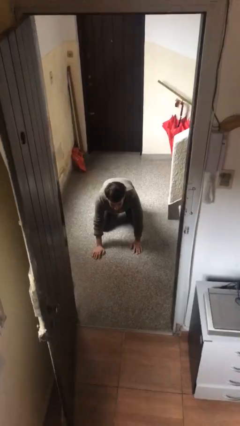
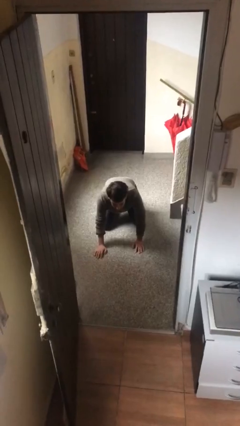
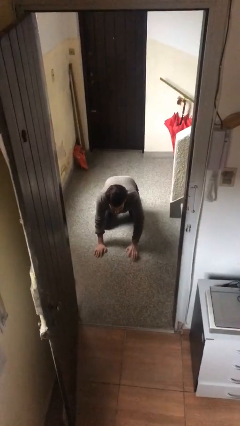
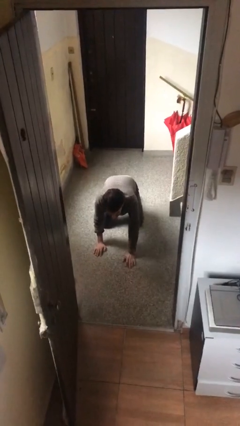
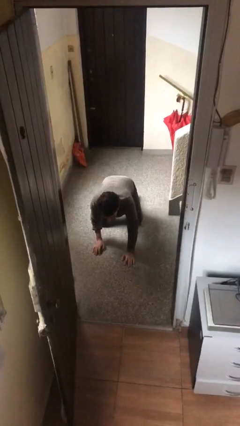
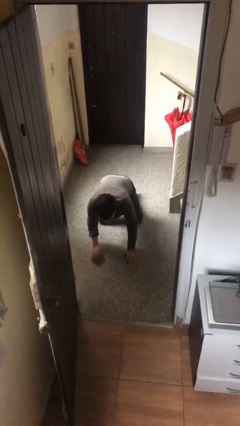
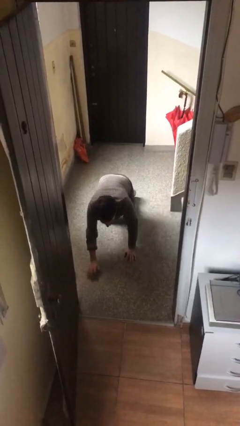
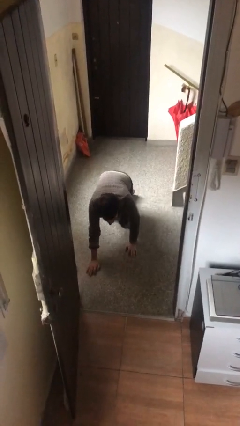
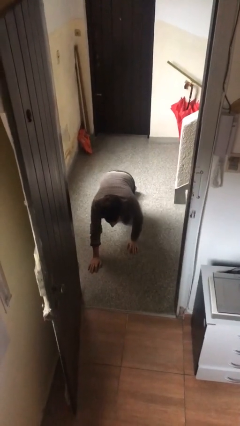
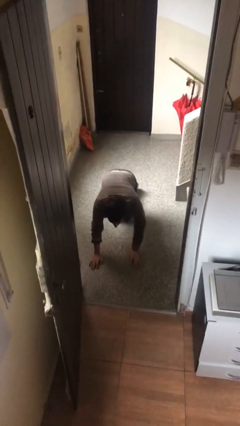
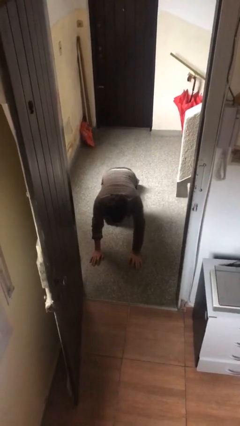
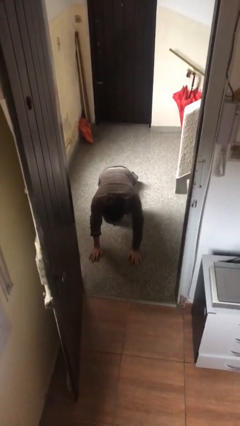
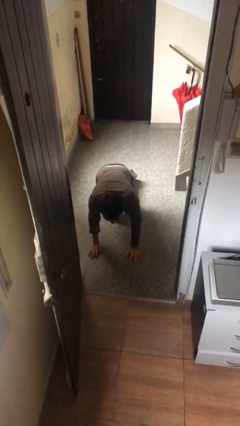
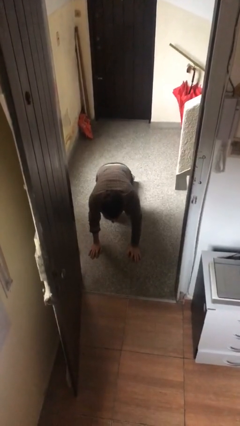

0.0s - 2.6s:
person crawls

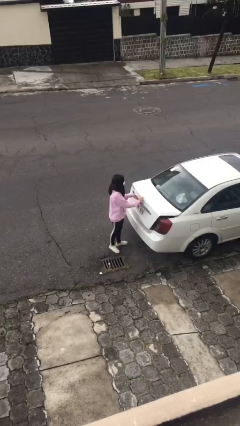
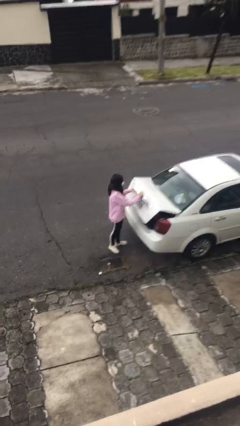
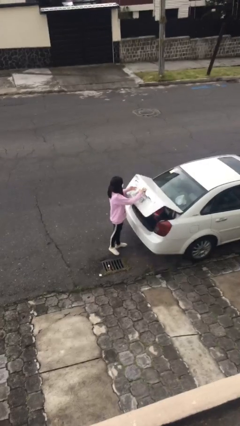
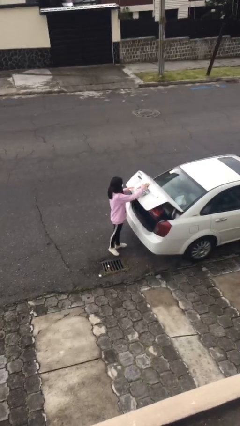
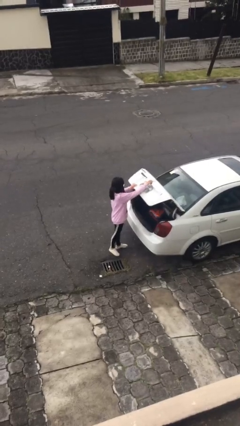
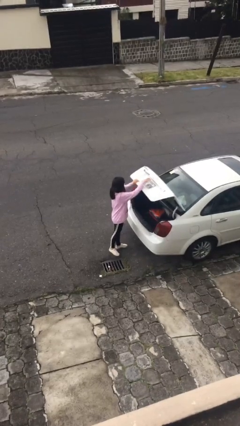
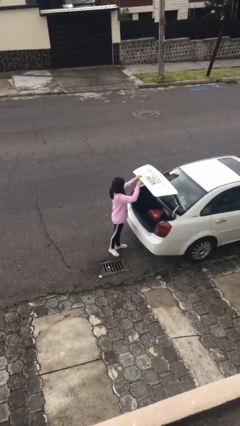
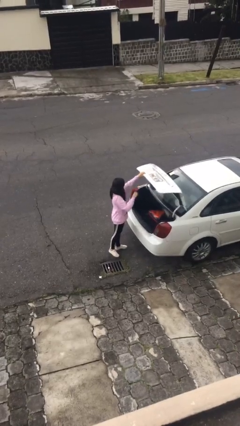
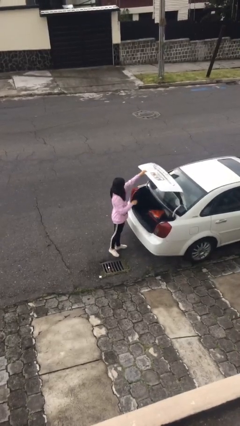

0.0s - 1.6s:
person opens car trunk

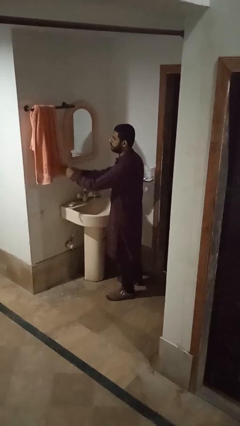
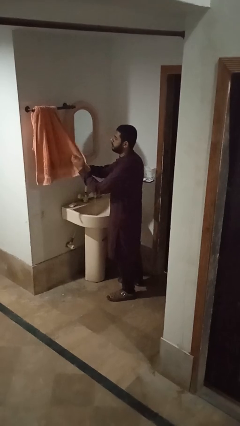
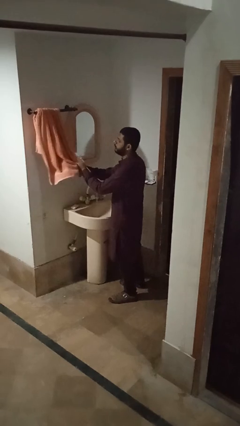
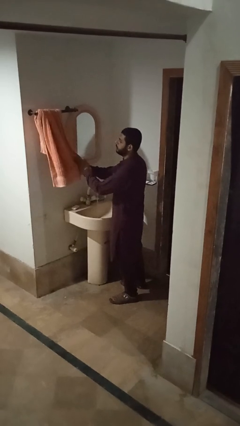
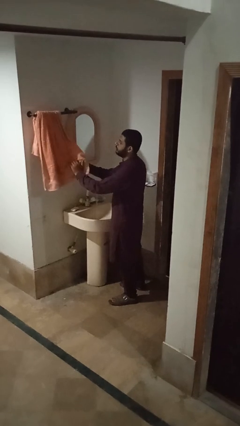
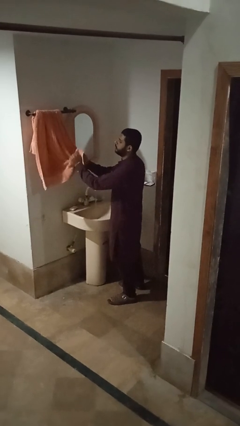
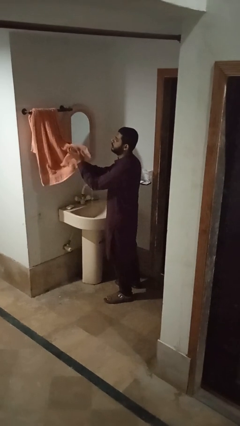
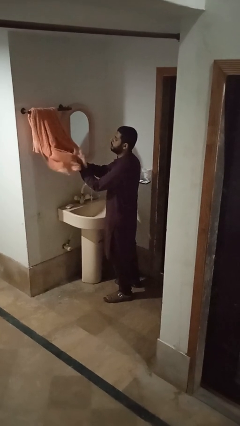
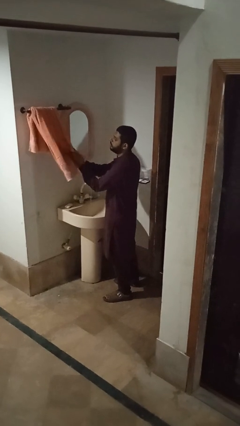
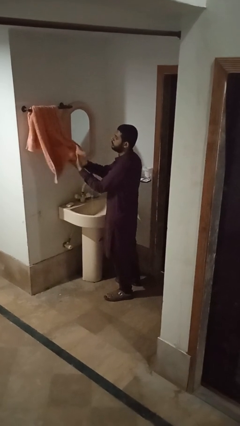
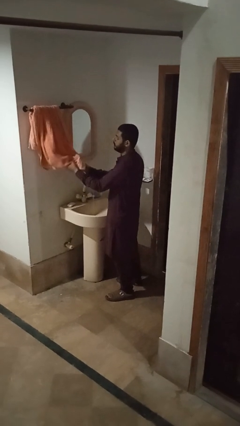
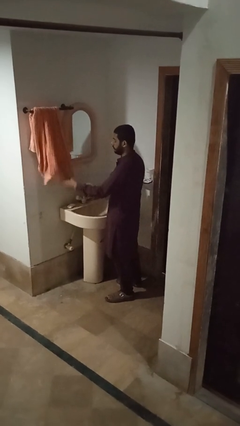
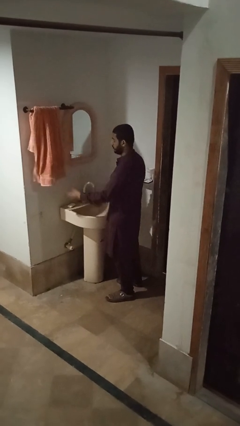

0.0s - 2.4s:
person dries hands with towel

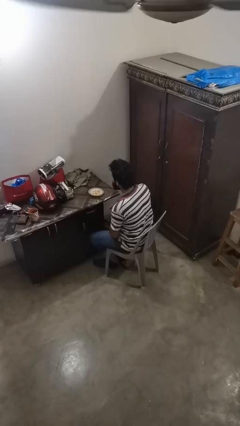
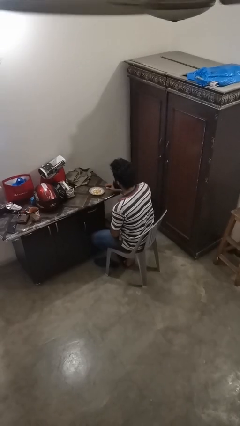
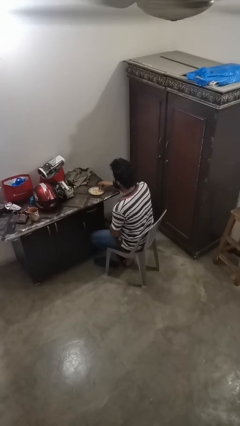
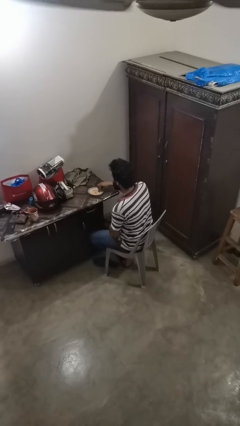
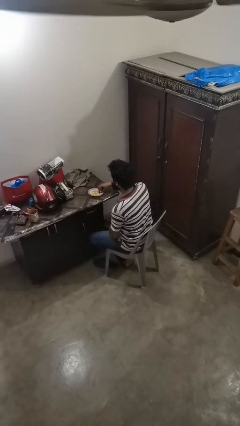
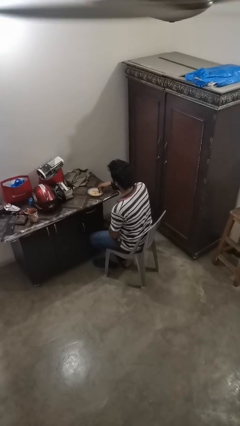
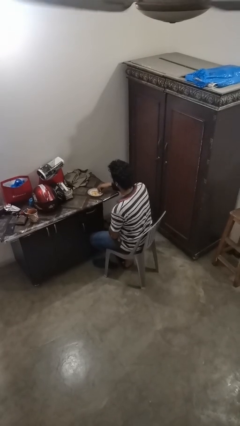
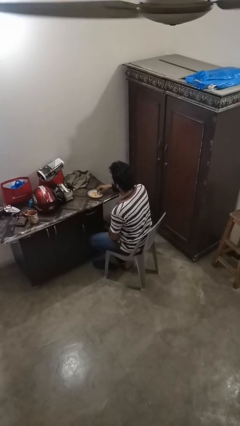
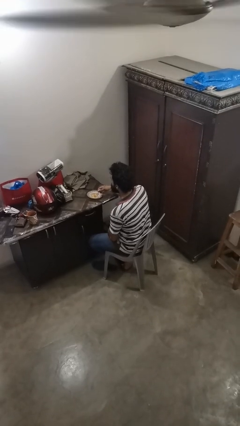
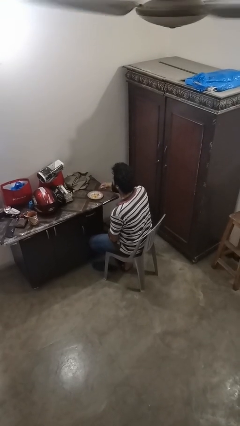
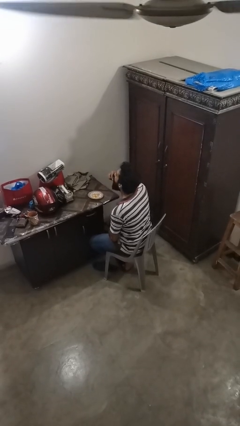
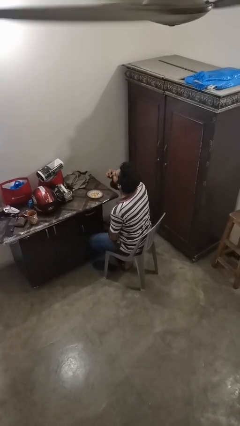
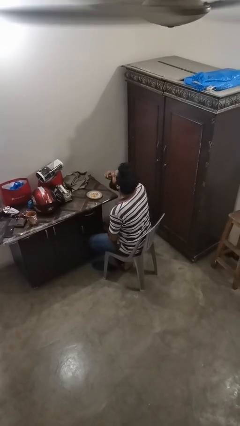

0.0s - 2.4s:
person eats with hands

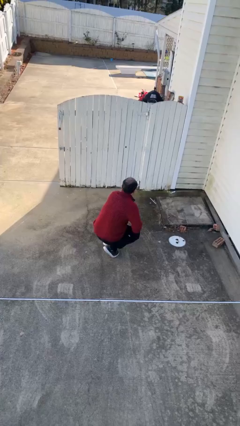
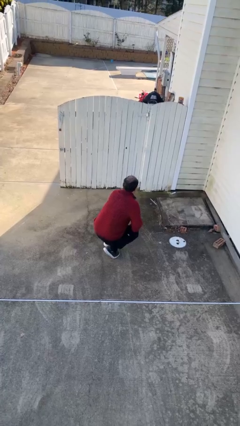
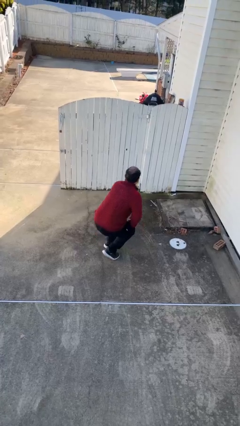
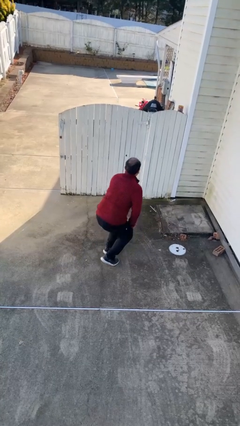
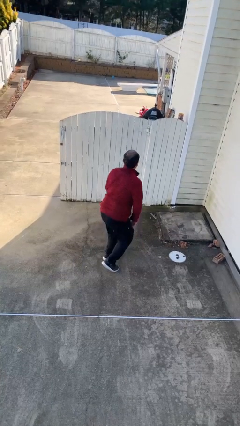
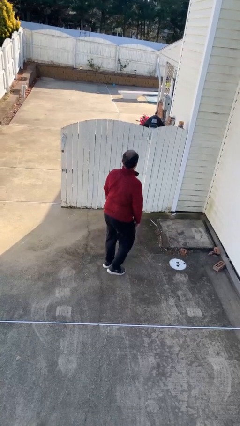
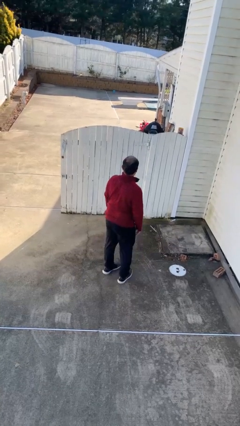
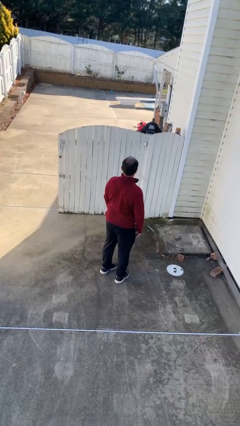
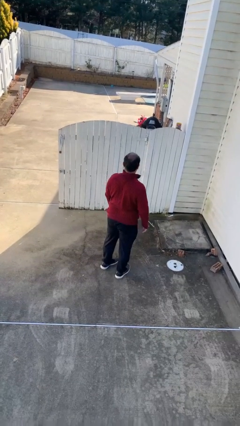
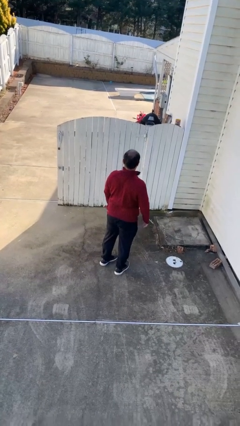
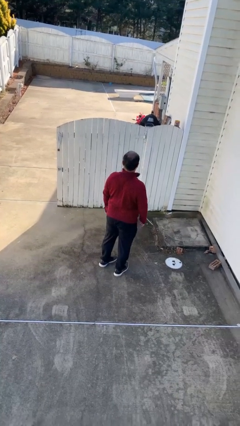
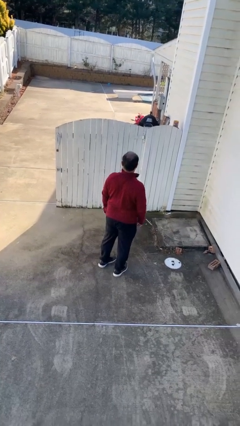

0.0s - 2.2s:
person stands up

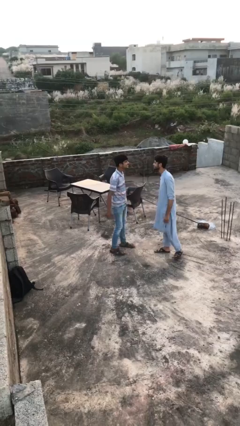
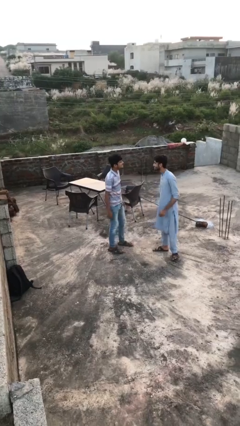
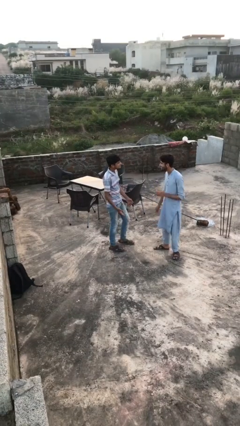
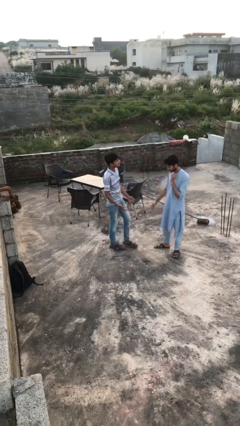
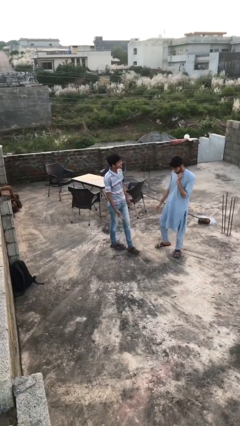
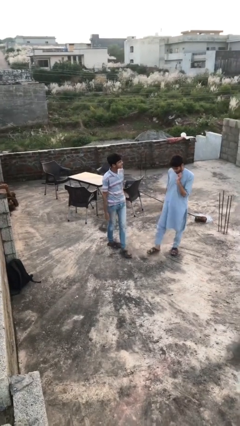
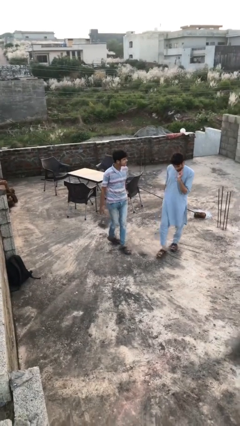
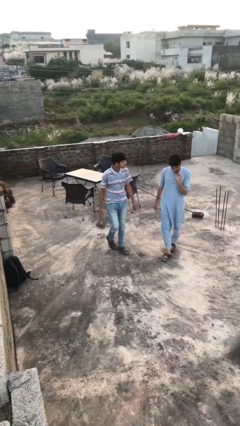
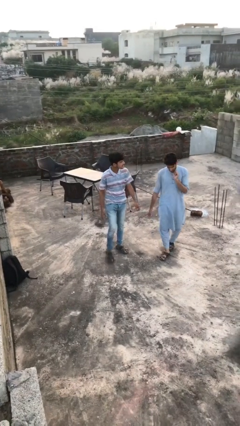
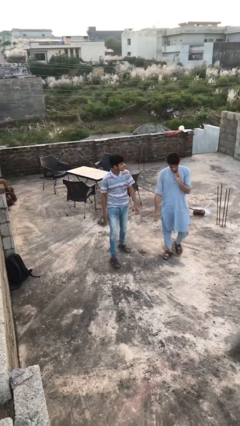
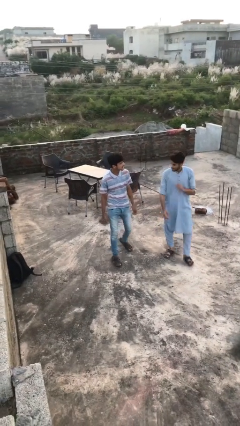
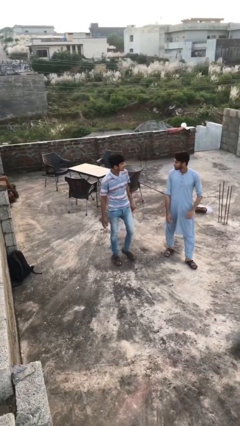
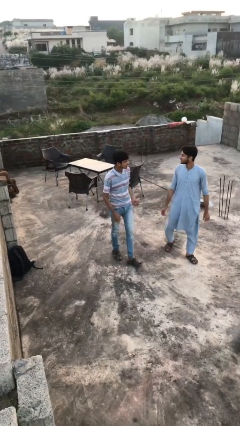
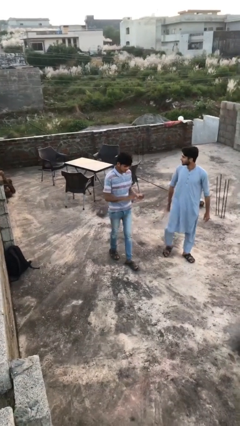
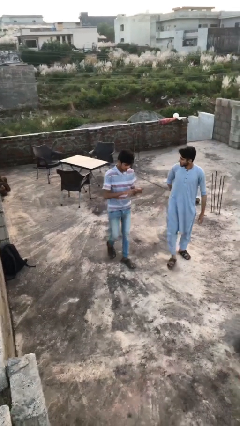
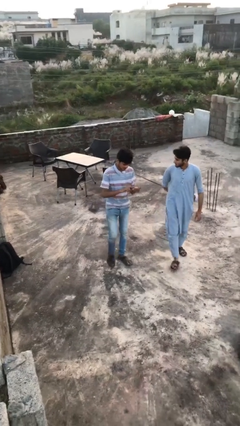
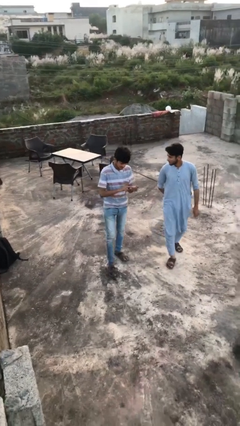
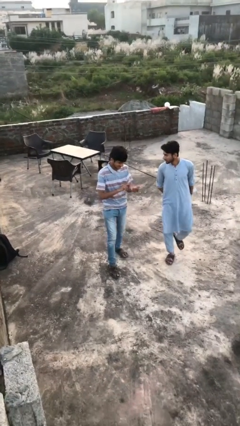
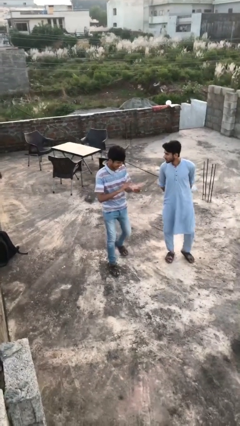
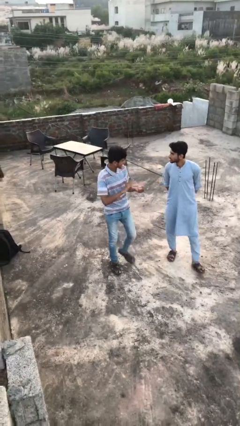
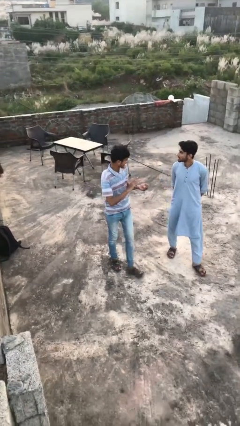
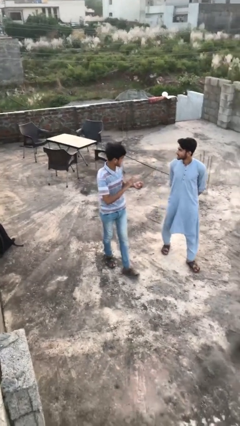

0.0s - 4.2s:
person talks to person

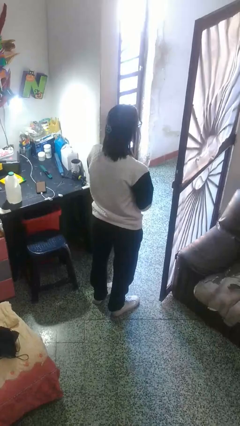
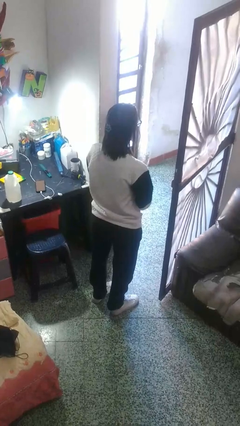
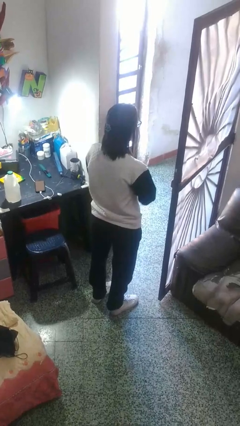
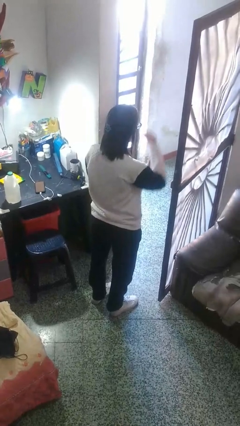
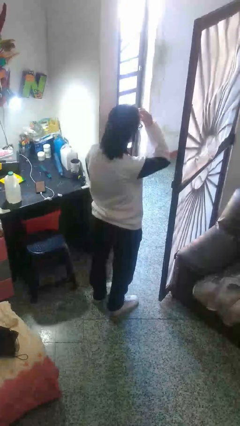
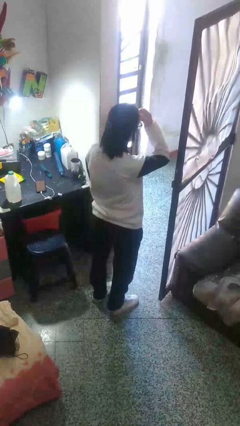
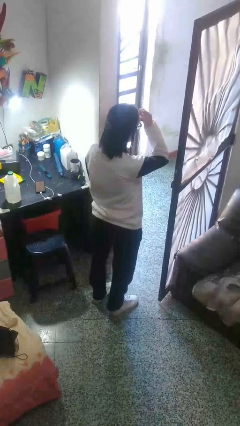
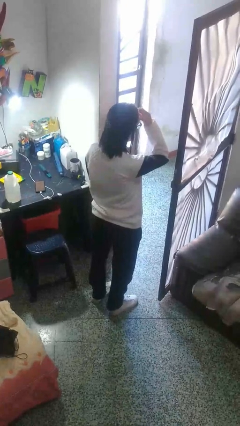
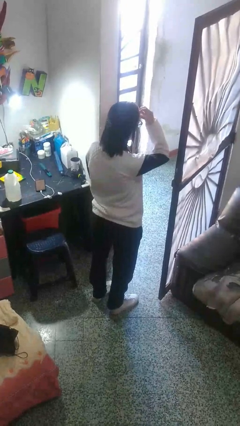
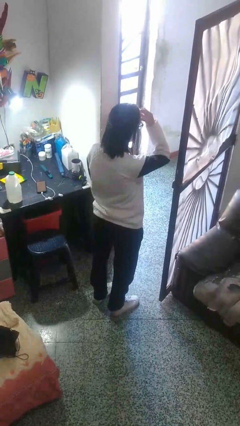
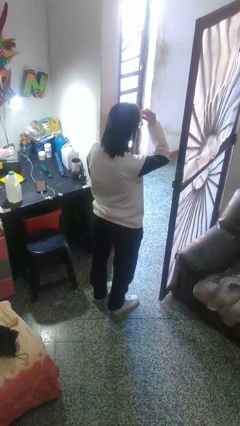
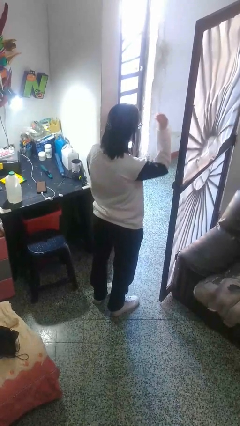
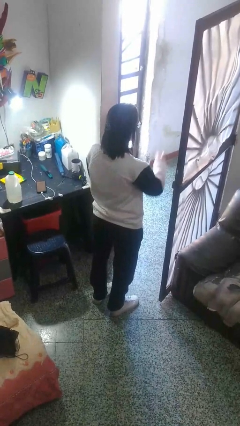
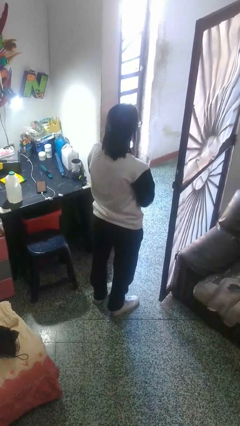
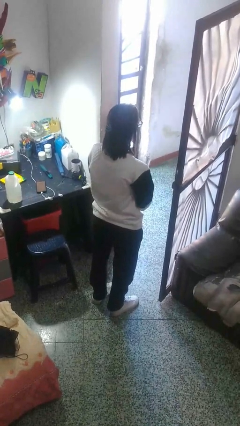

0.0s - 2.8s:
person scratches face
